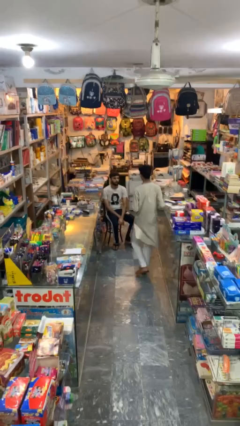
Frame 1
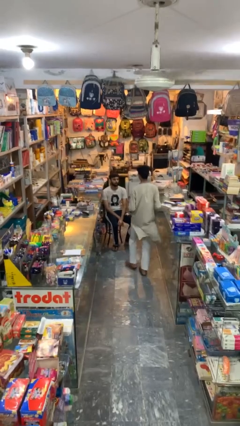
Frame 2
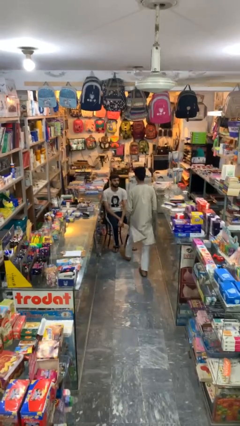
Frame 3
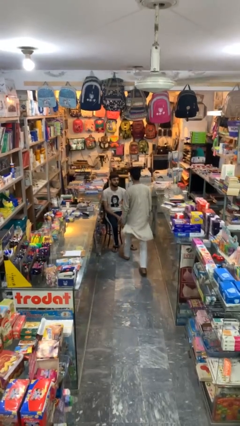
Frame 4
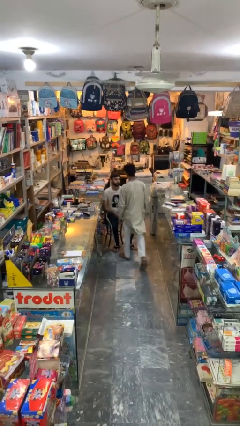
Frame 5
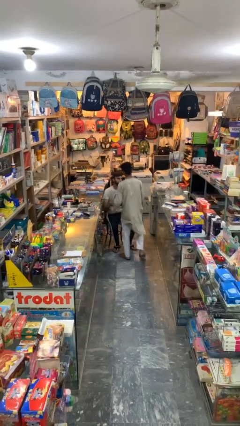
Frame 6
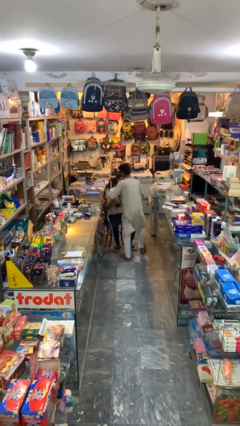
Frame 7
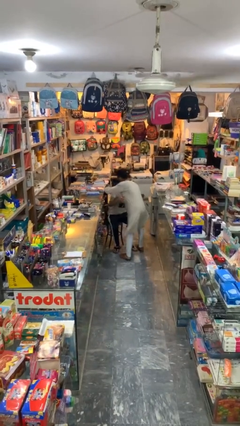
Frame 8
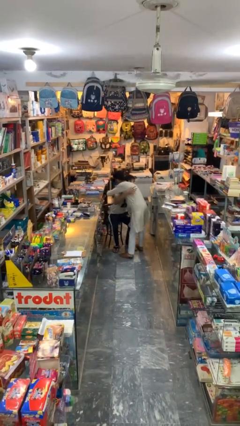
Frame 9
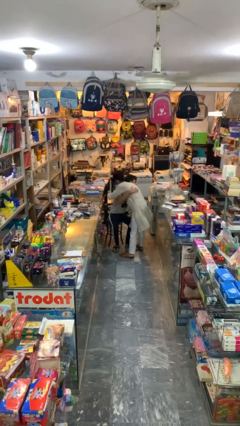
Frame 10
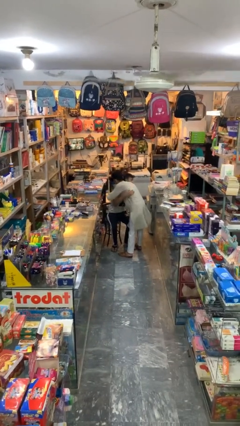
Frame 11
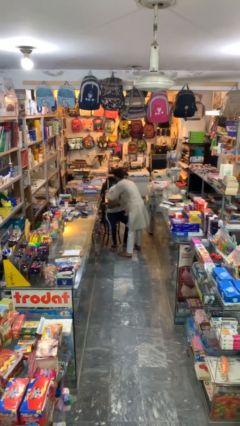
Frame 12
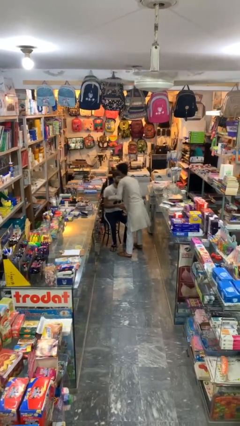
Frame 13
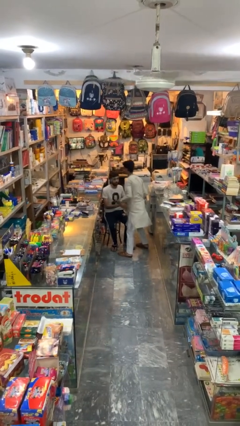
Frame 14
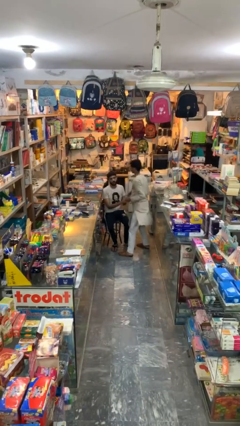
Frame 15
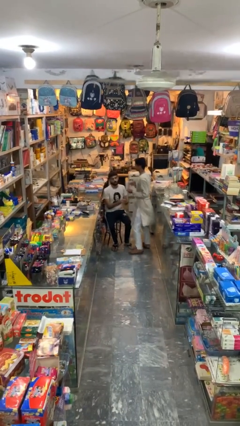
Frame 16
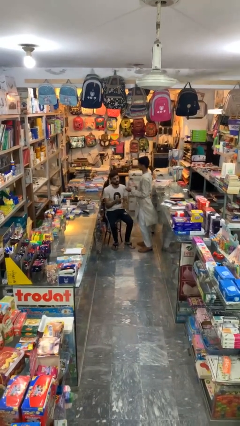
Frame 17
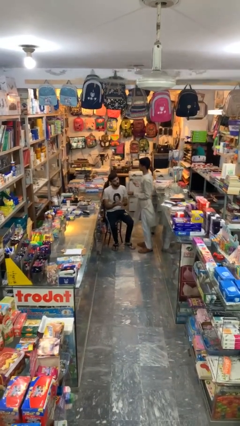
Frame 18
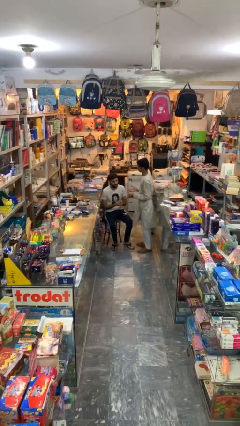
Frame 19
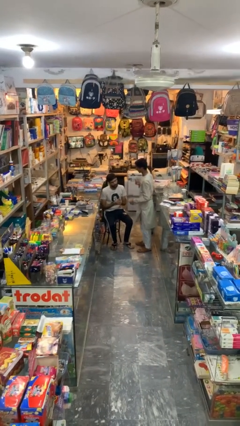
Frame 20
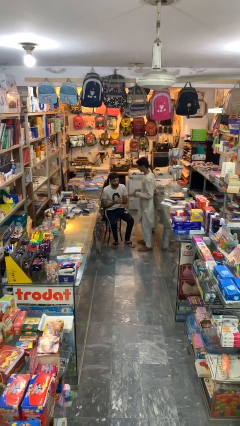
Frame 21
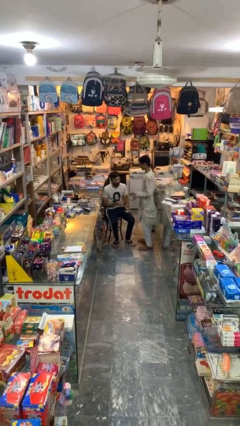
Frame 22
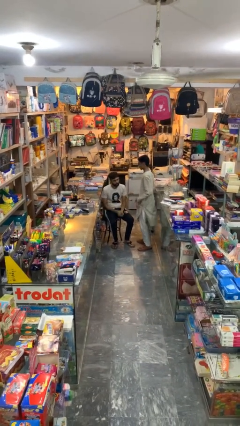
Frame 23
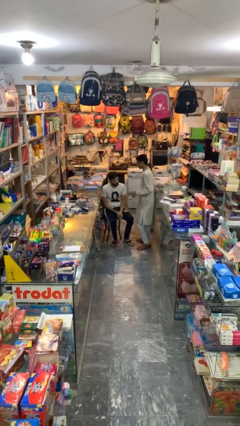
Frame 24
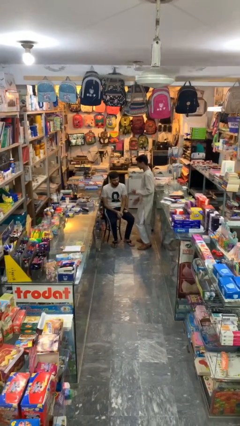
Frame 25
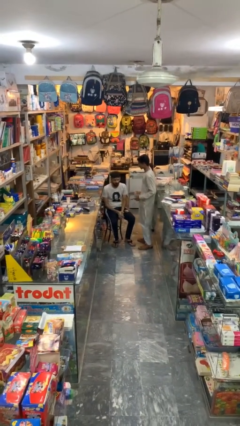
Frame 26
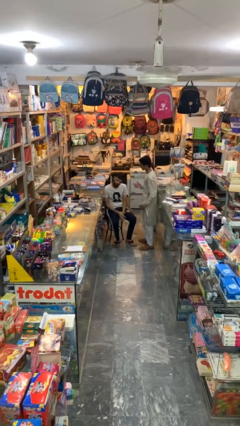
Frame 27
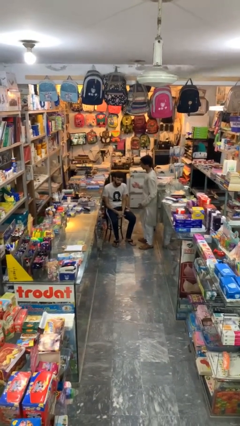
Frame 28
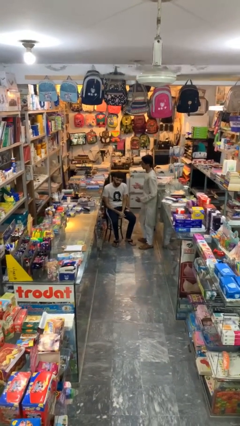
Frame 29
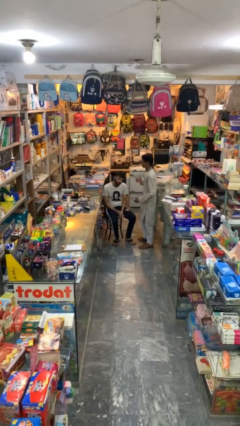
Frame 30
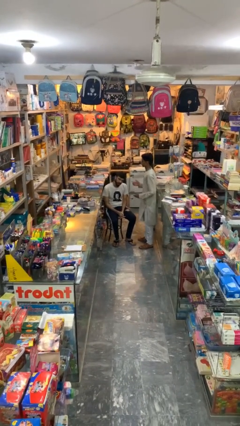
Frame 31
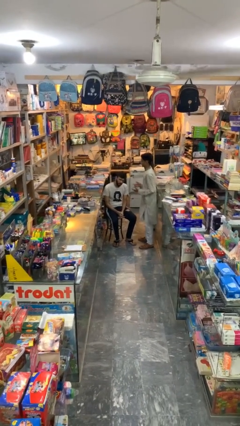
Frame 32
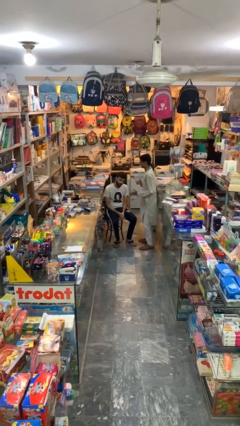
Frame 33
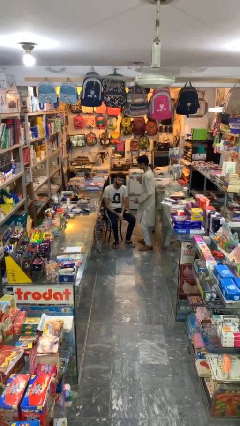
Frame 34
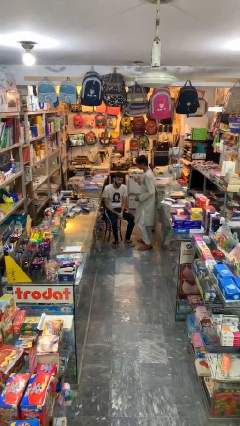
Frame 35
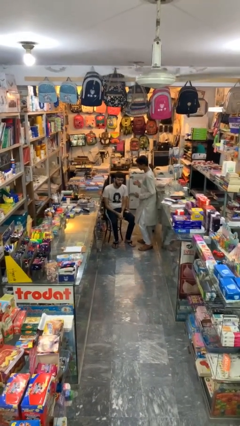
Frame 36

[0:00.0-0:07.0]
person embraces person

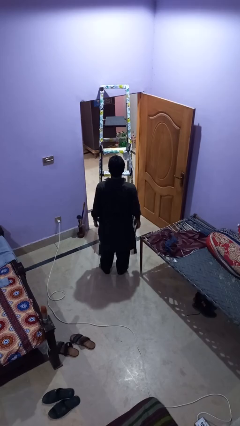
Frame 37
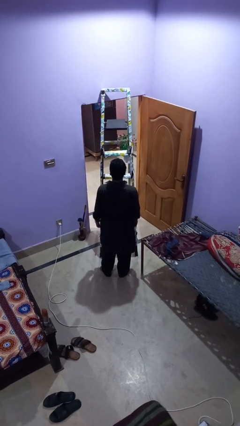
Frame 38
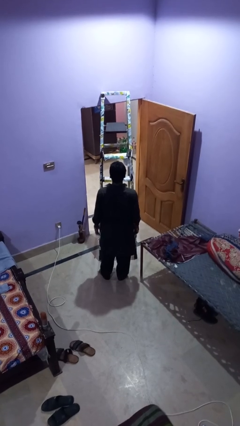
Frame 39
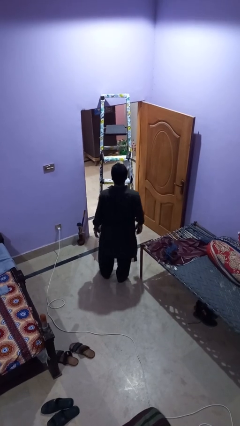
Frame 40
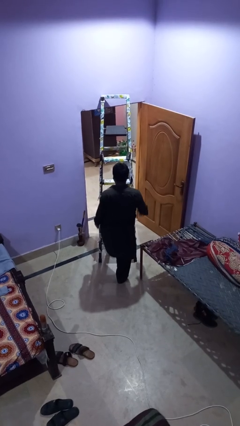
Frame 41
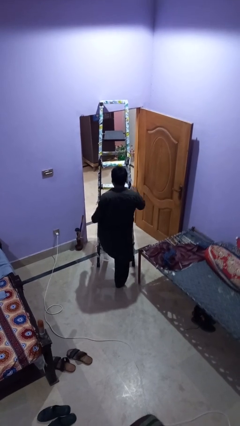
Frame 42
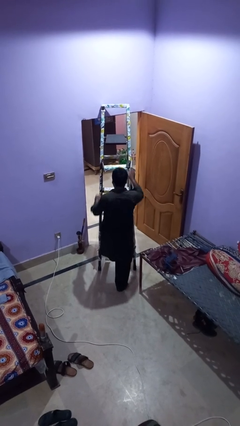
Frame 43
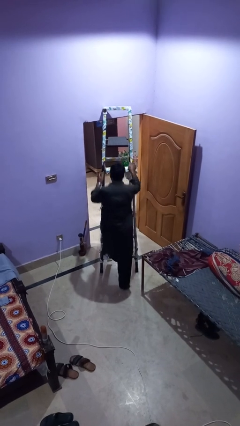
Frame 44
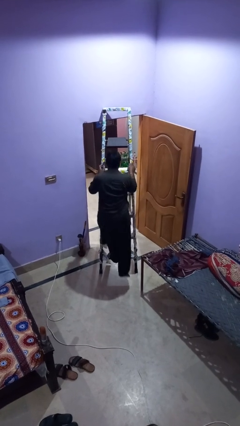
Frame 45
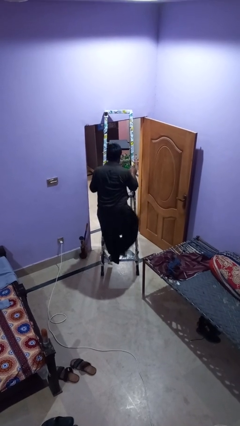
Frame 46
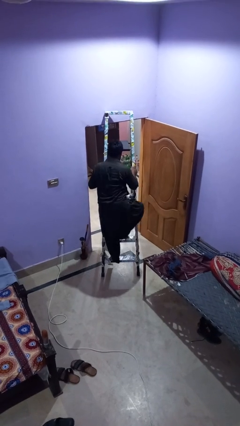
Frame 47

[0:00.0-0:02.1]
person climbs up ladder

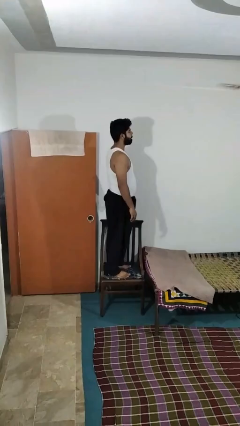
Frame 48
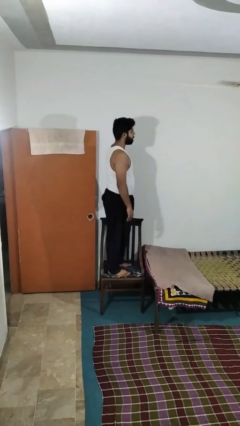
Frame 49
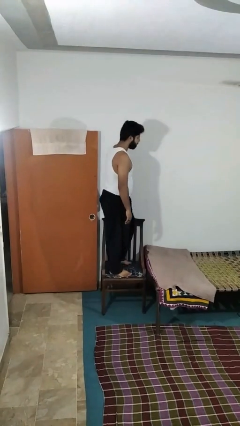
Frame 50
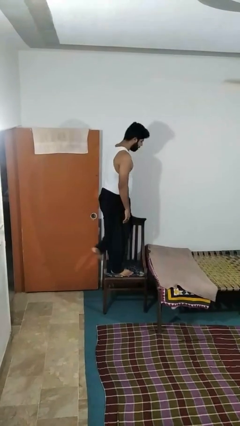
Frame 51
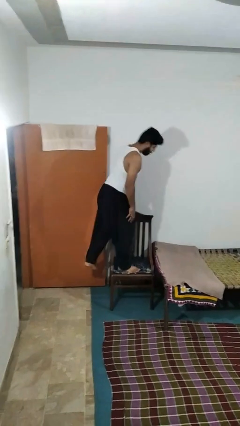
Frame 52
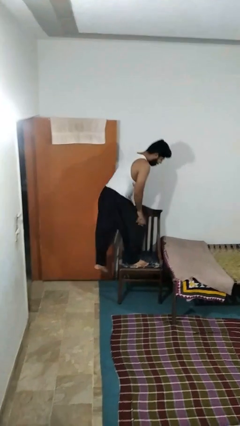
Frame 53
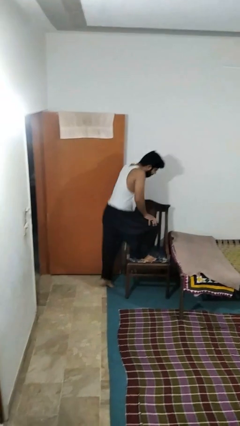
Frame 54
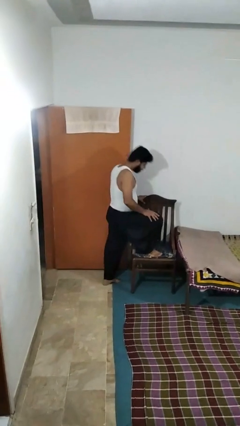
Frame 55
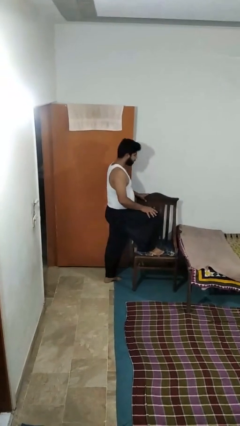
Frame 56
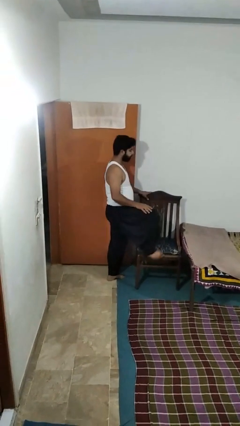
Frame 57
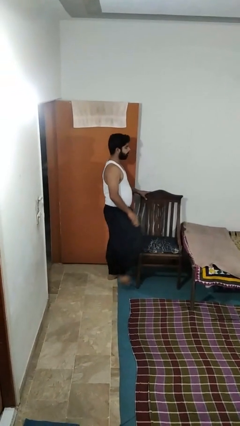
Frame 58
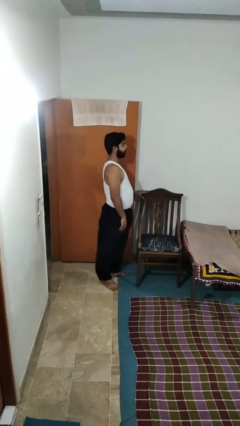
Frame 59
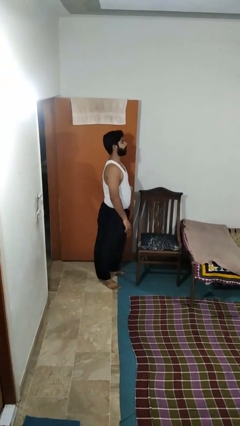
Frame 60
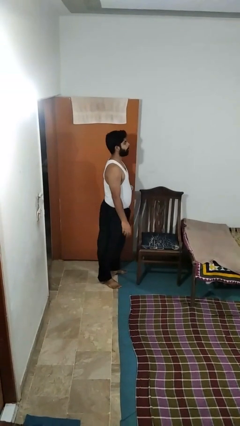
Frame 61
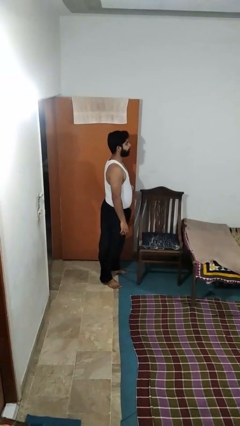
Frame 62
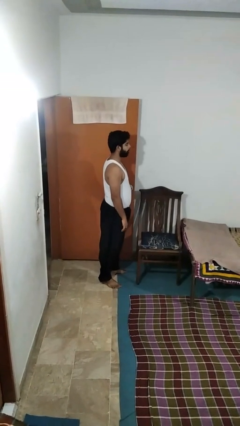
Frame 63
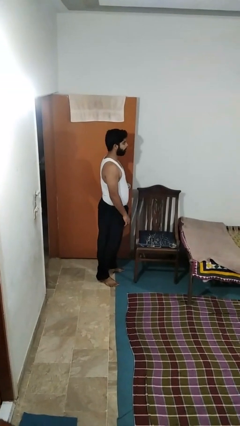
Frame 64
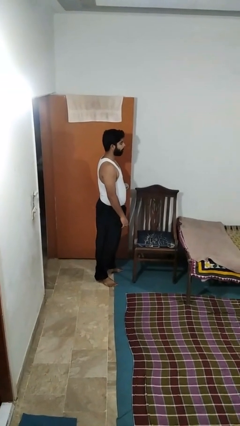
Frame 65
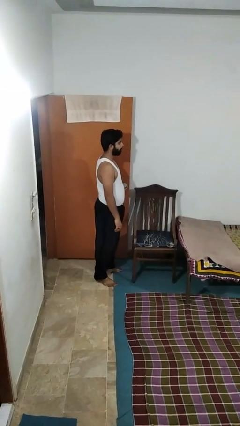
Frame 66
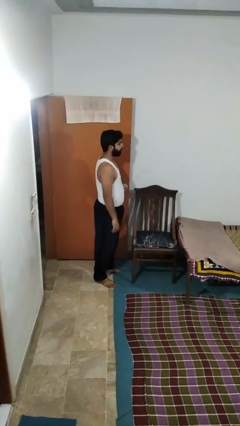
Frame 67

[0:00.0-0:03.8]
person climbs off chair

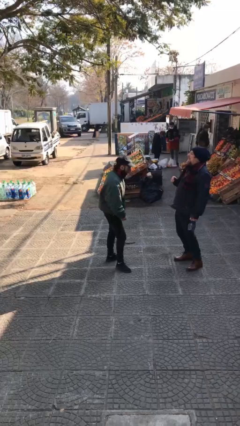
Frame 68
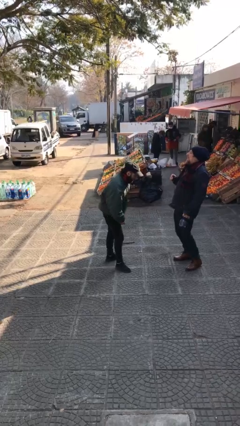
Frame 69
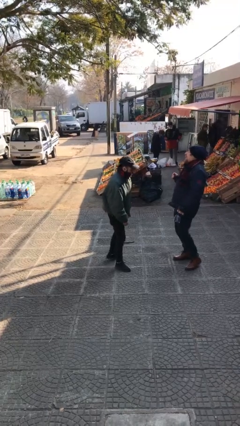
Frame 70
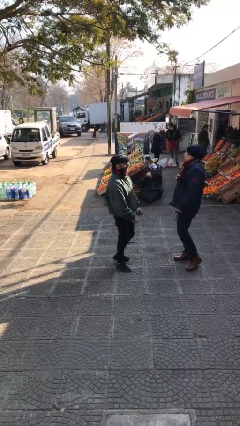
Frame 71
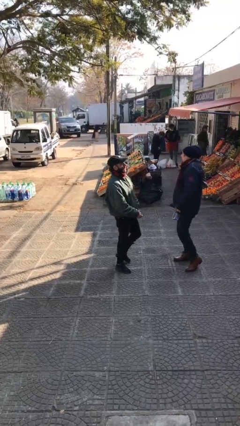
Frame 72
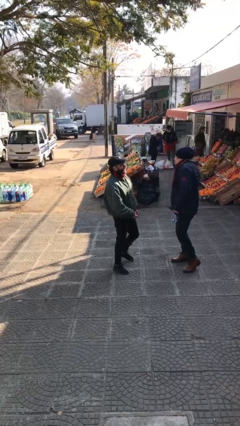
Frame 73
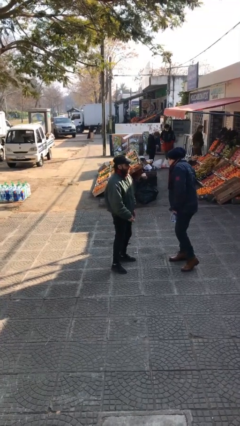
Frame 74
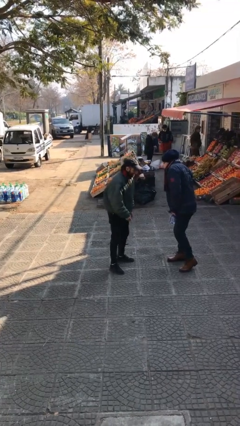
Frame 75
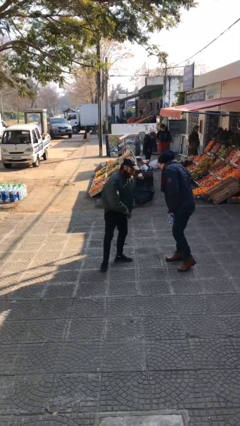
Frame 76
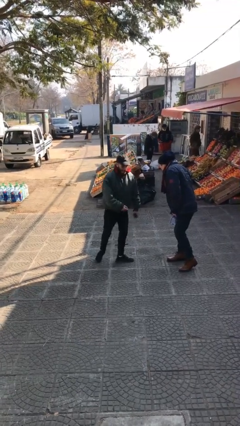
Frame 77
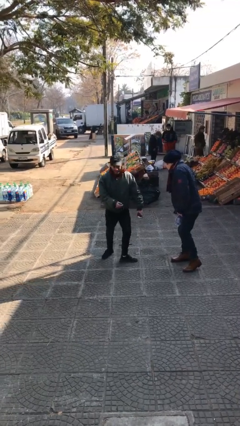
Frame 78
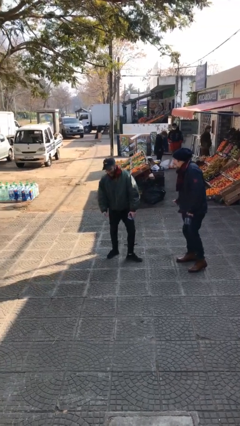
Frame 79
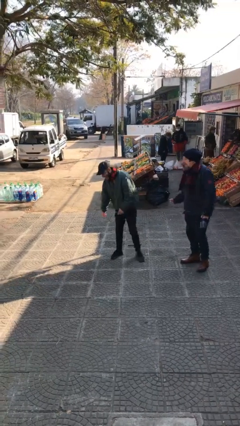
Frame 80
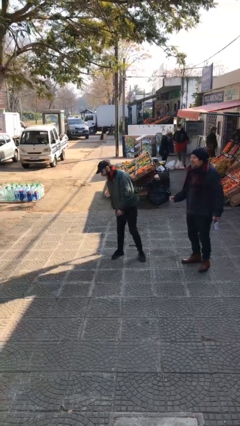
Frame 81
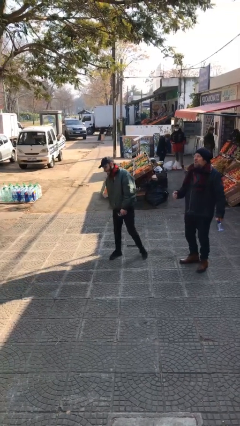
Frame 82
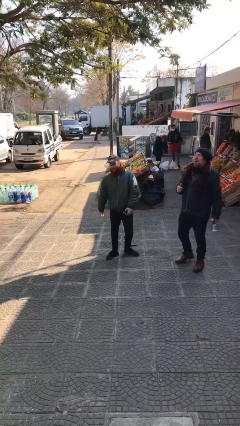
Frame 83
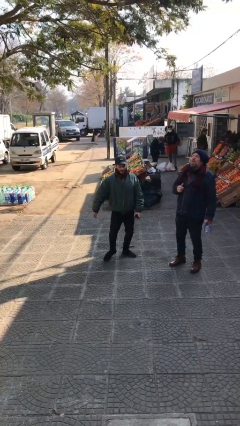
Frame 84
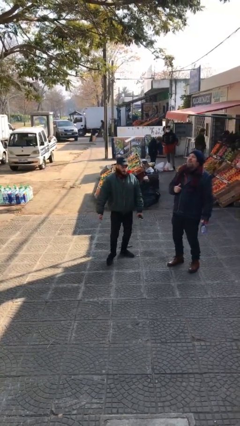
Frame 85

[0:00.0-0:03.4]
person laughs with person

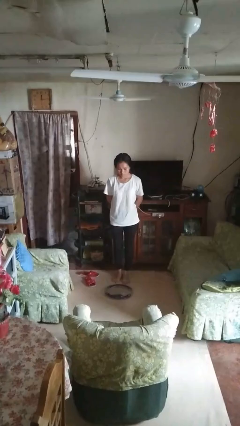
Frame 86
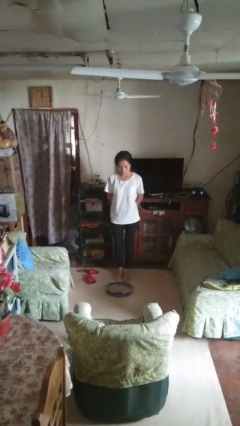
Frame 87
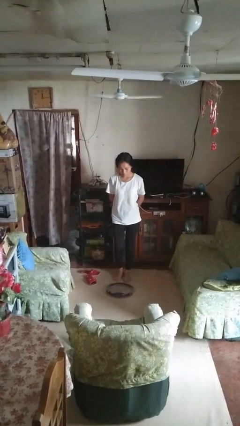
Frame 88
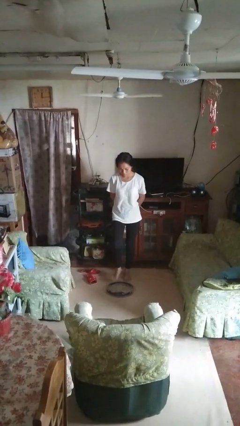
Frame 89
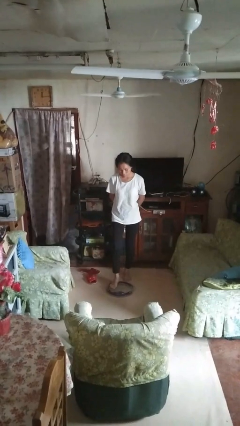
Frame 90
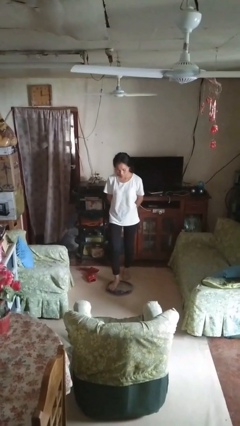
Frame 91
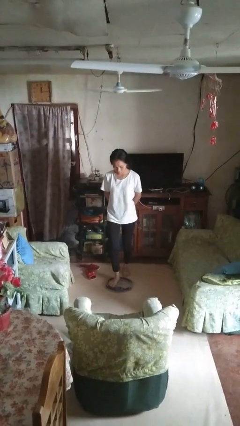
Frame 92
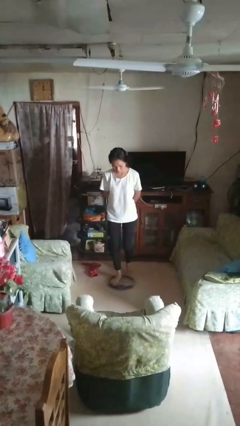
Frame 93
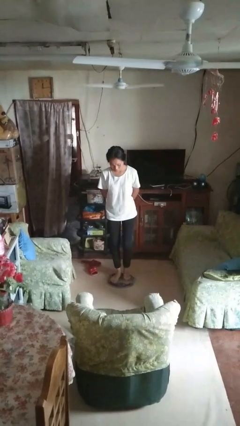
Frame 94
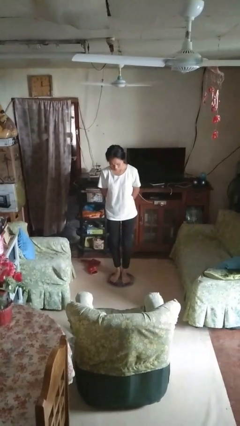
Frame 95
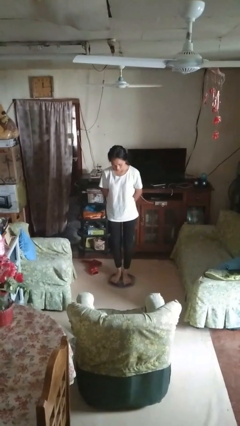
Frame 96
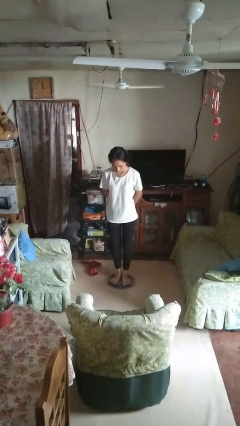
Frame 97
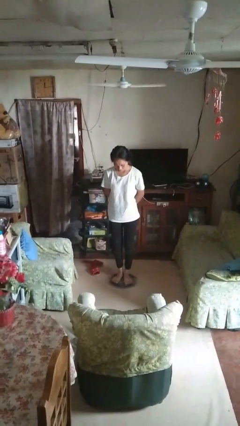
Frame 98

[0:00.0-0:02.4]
person uses bodyweight scale
